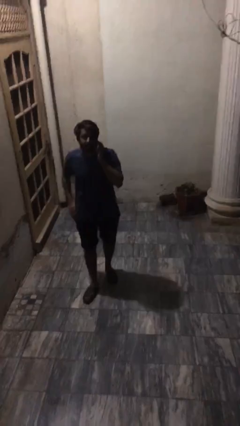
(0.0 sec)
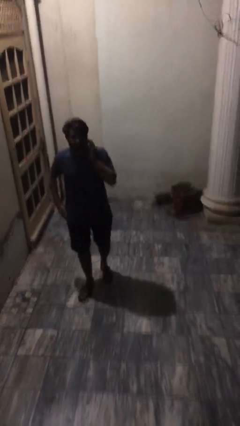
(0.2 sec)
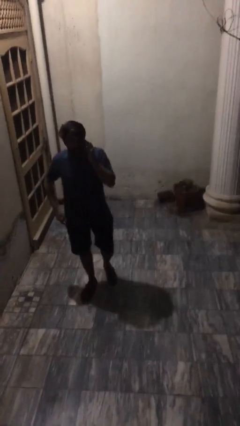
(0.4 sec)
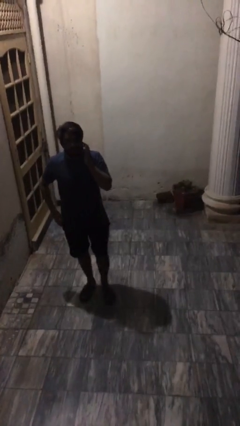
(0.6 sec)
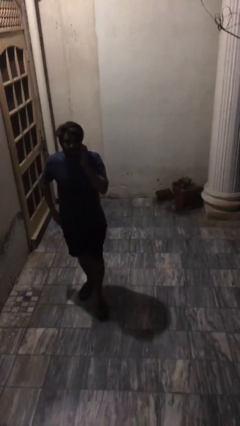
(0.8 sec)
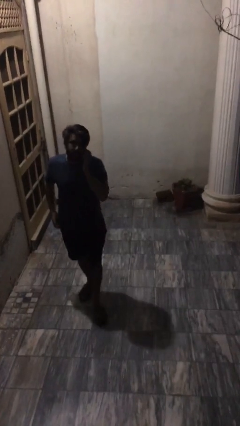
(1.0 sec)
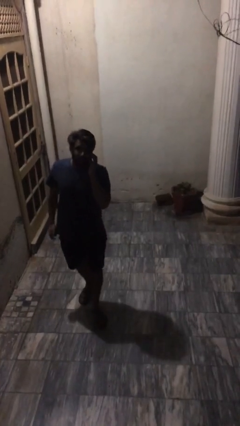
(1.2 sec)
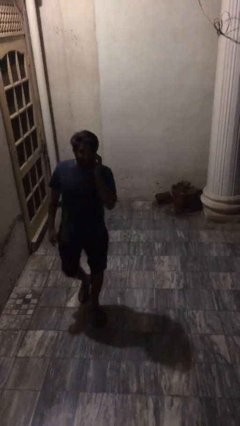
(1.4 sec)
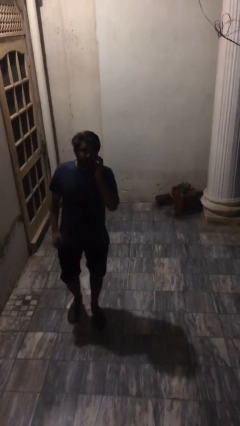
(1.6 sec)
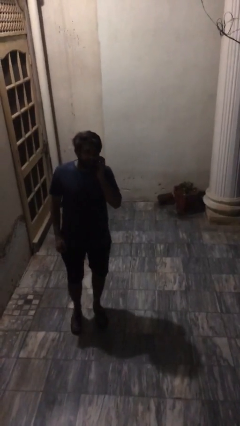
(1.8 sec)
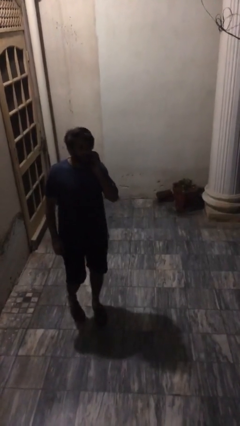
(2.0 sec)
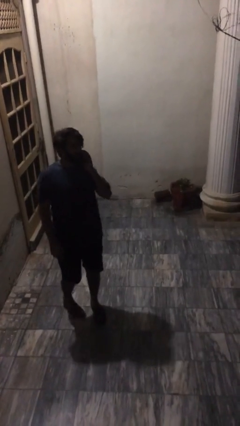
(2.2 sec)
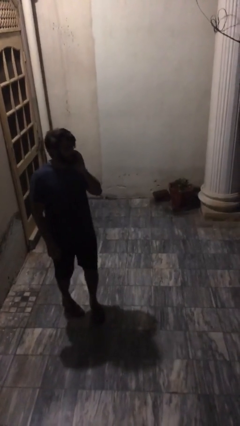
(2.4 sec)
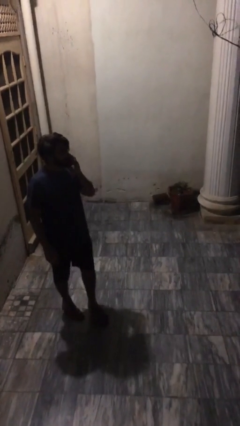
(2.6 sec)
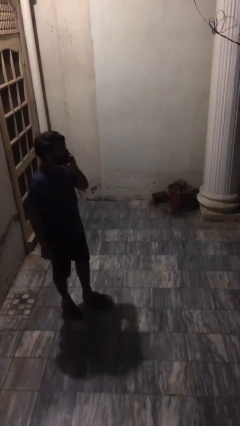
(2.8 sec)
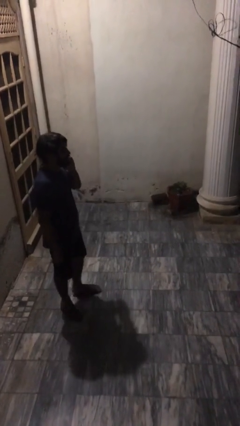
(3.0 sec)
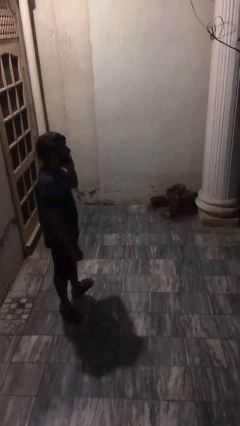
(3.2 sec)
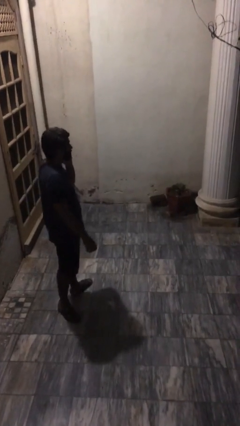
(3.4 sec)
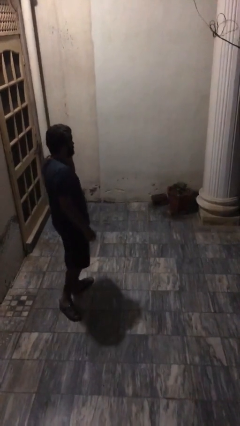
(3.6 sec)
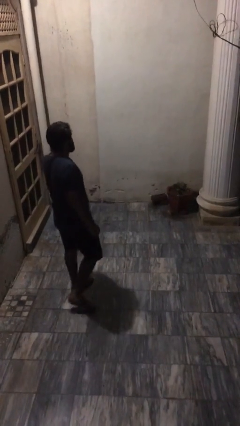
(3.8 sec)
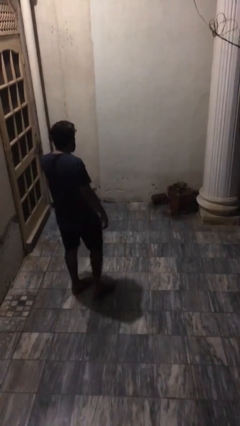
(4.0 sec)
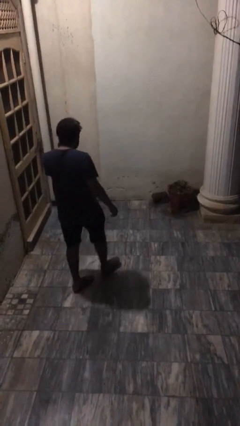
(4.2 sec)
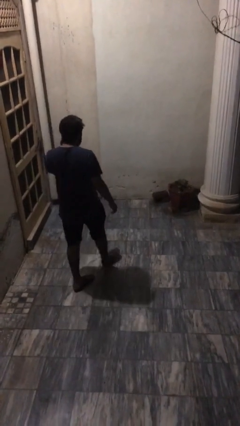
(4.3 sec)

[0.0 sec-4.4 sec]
person talks on phone

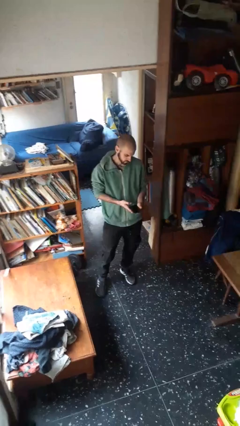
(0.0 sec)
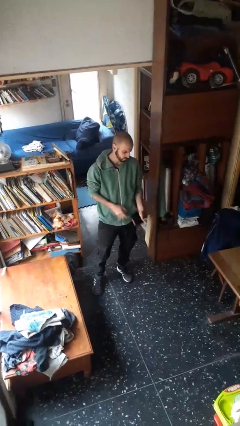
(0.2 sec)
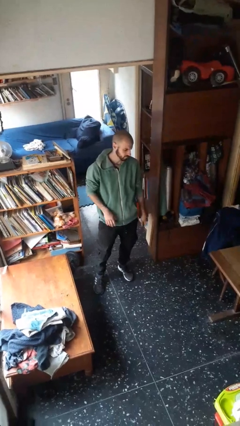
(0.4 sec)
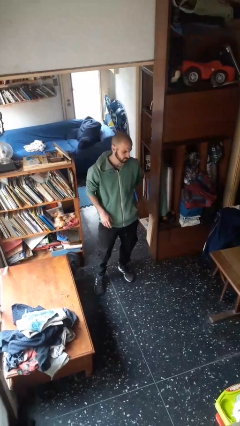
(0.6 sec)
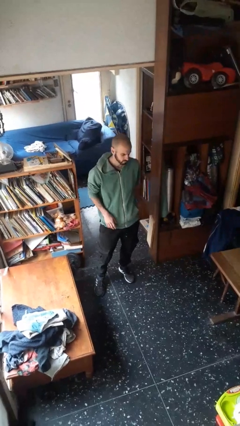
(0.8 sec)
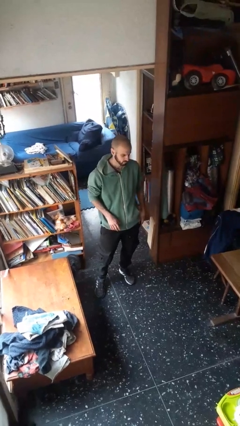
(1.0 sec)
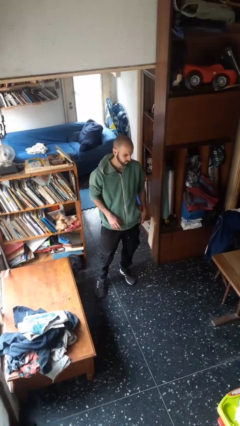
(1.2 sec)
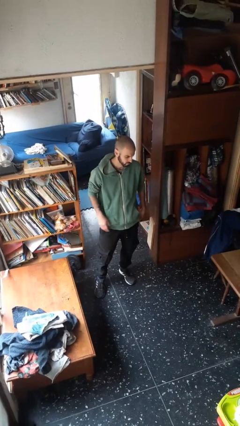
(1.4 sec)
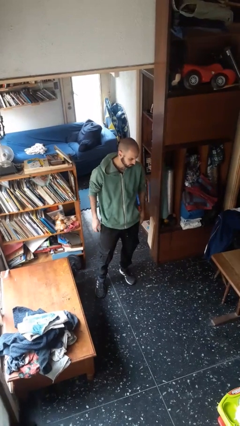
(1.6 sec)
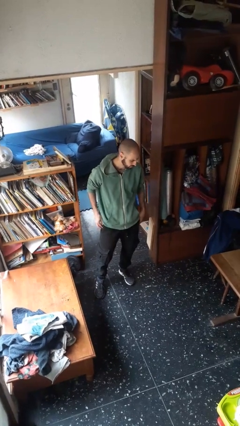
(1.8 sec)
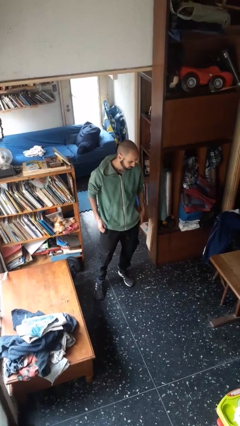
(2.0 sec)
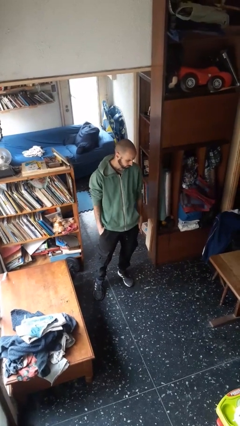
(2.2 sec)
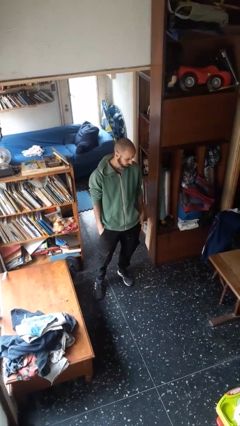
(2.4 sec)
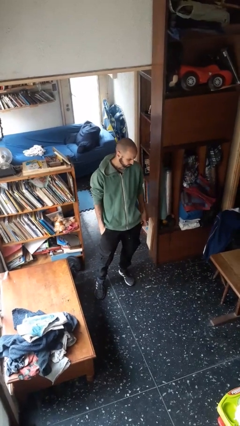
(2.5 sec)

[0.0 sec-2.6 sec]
person puts phone into pocket

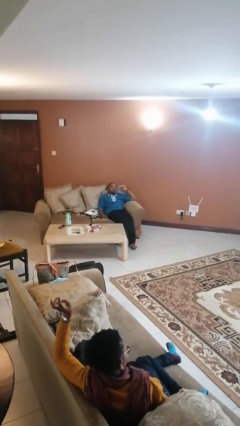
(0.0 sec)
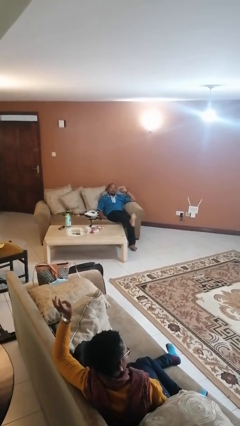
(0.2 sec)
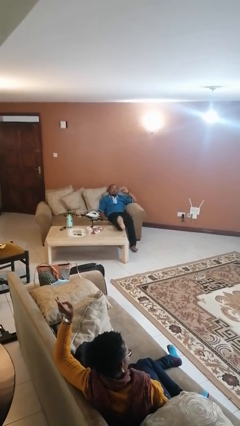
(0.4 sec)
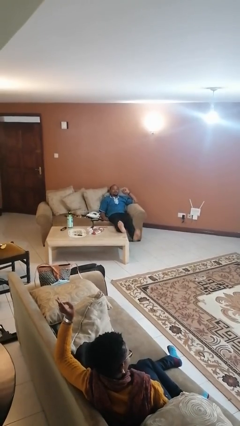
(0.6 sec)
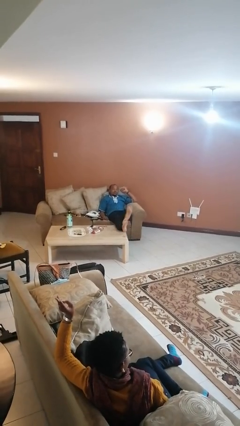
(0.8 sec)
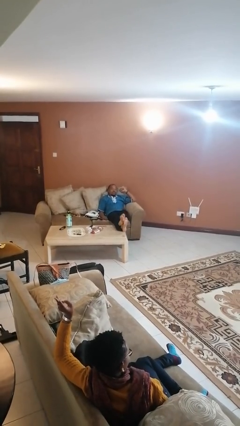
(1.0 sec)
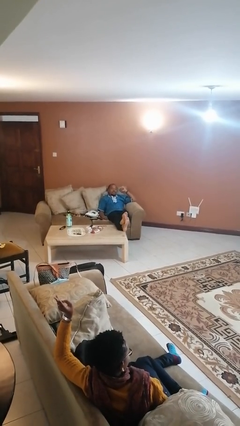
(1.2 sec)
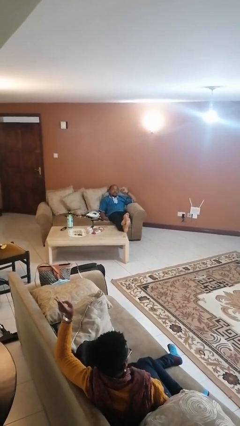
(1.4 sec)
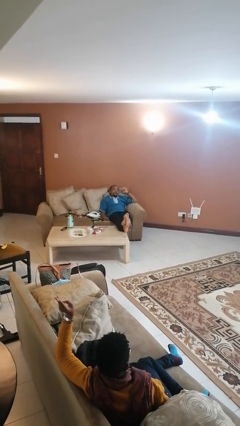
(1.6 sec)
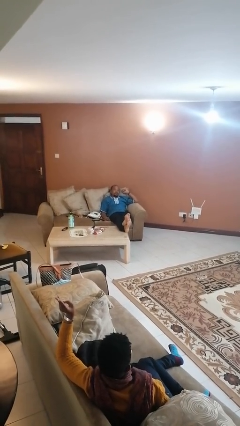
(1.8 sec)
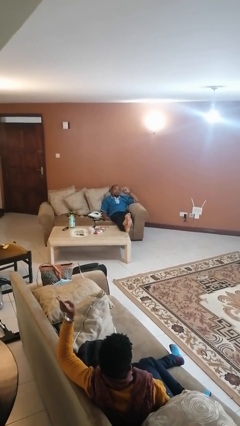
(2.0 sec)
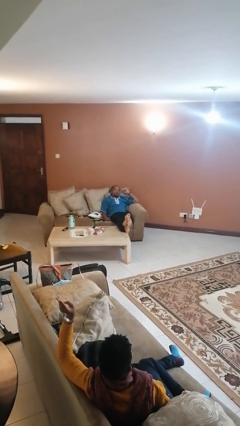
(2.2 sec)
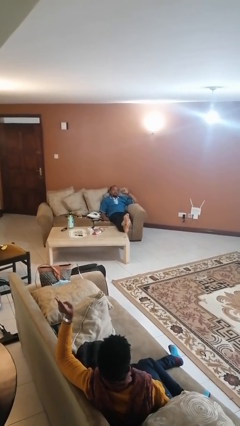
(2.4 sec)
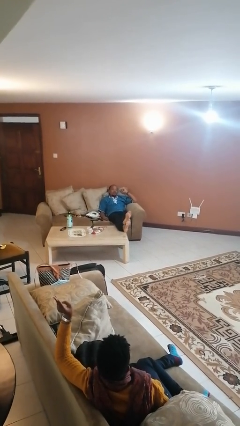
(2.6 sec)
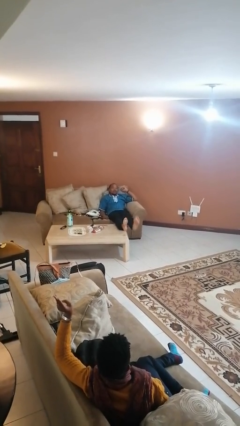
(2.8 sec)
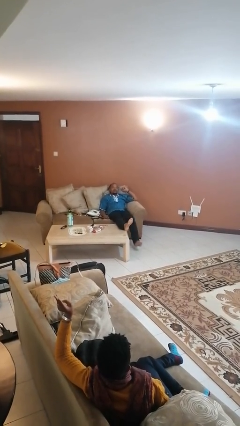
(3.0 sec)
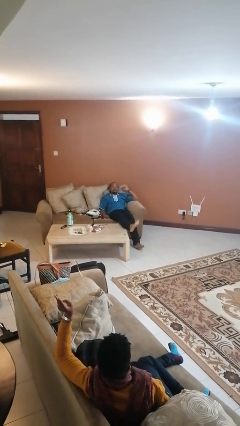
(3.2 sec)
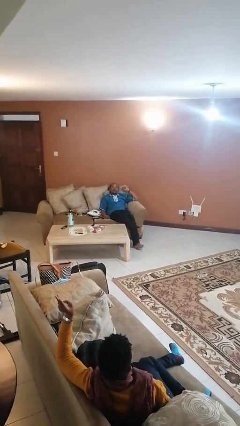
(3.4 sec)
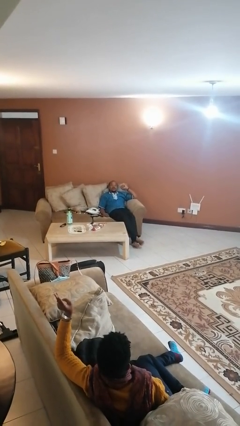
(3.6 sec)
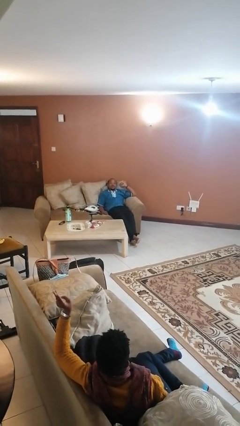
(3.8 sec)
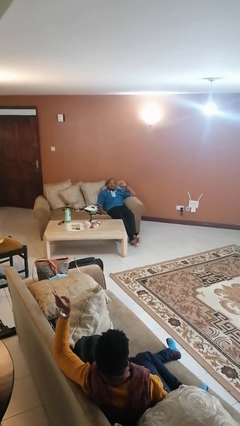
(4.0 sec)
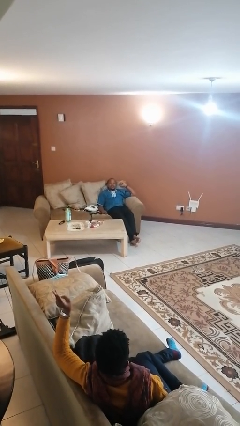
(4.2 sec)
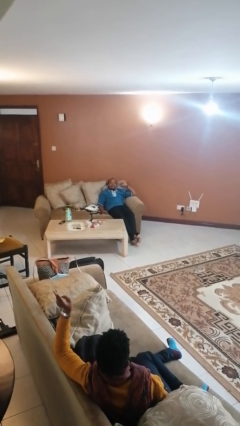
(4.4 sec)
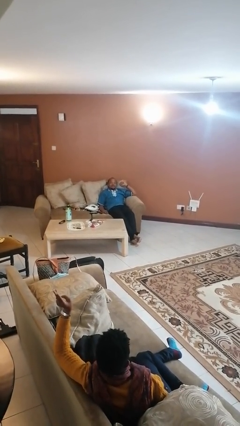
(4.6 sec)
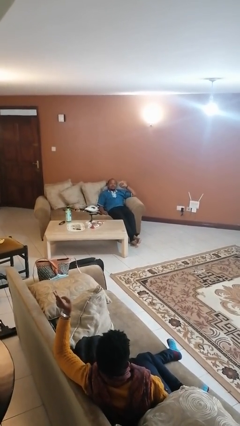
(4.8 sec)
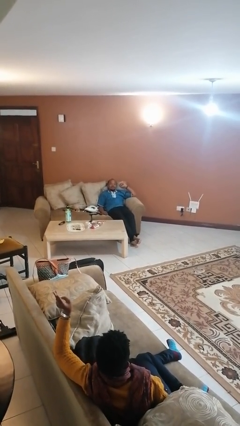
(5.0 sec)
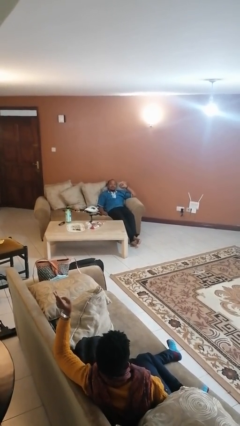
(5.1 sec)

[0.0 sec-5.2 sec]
person puts feet up

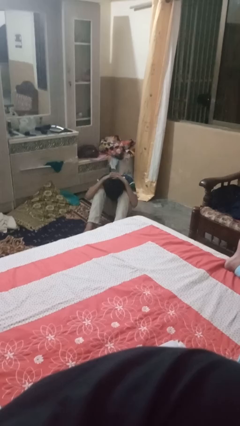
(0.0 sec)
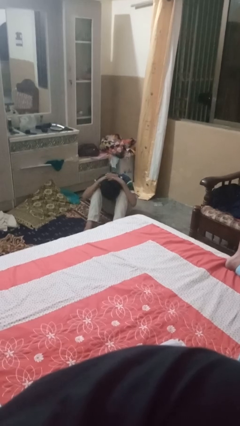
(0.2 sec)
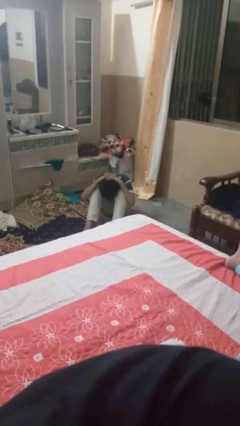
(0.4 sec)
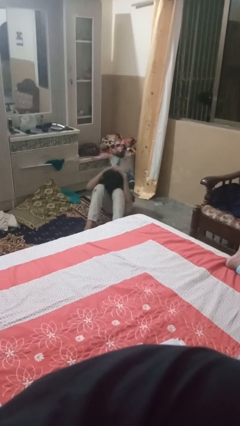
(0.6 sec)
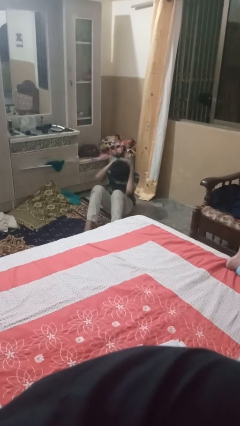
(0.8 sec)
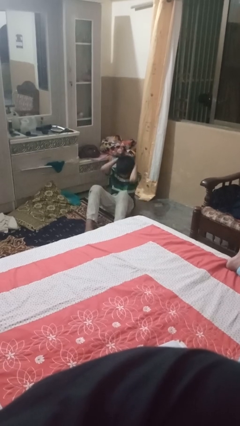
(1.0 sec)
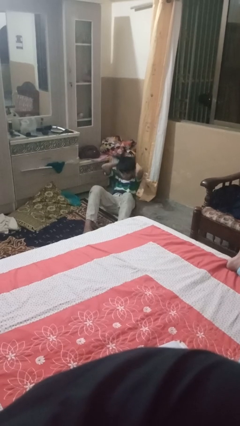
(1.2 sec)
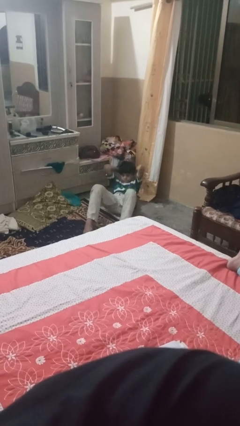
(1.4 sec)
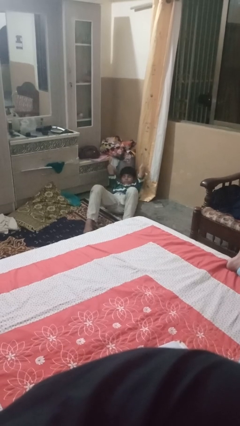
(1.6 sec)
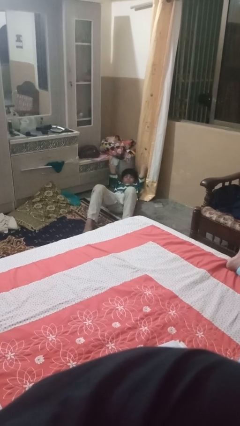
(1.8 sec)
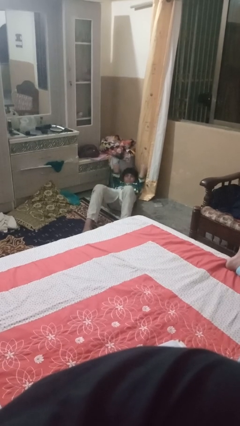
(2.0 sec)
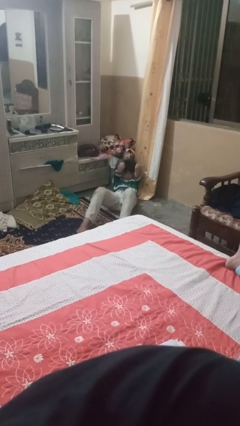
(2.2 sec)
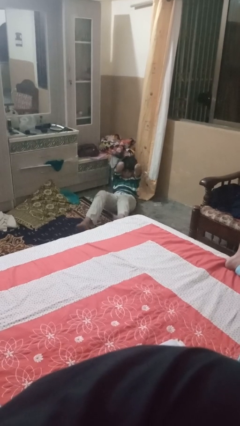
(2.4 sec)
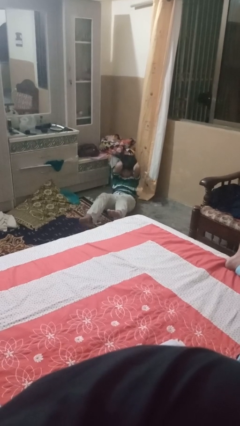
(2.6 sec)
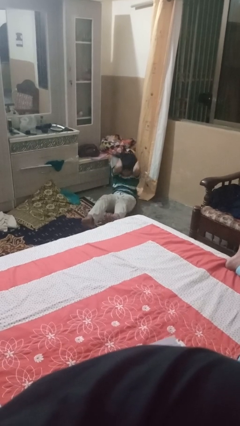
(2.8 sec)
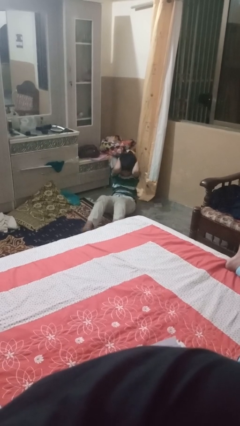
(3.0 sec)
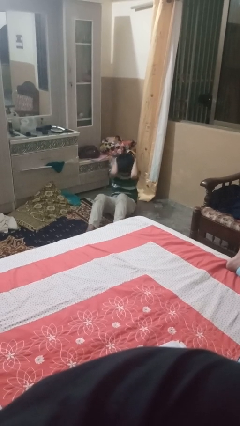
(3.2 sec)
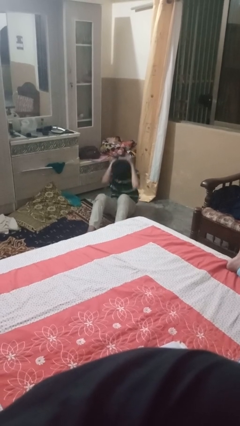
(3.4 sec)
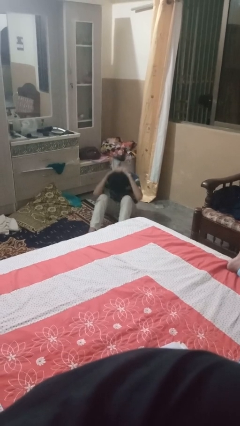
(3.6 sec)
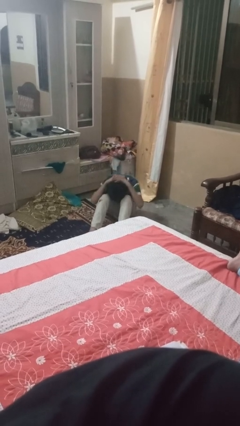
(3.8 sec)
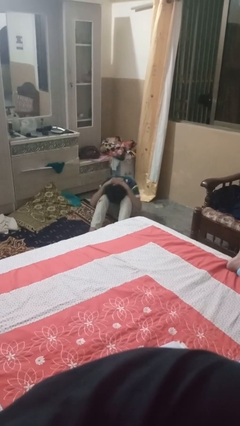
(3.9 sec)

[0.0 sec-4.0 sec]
person exercises with situp

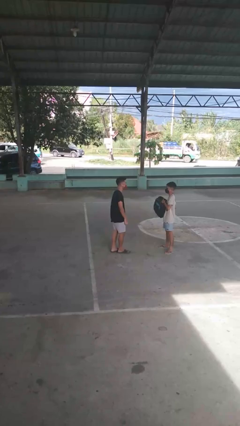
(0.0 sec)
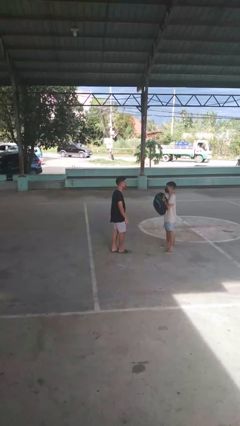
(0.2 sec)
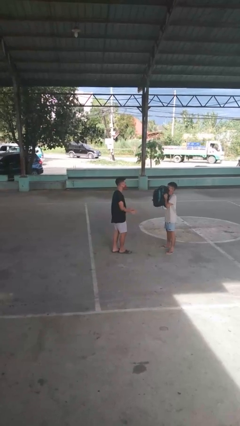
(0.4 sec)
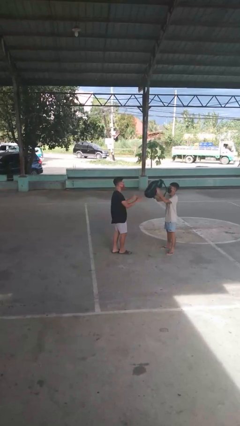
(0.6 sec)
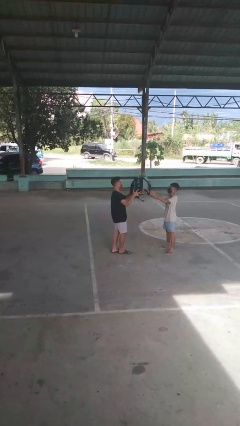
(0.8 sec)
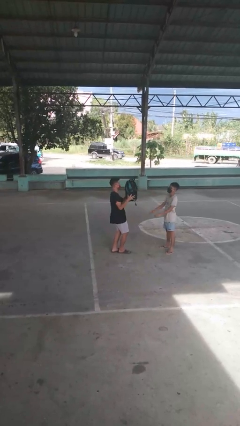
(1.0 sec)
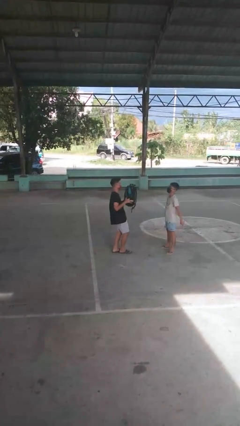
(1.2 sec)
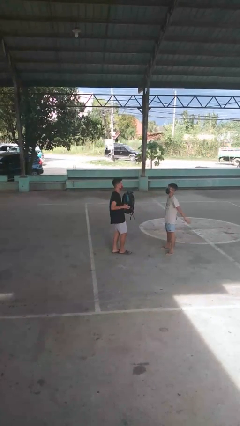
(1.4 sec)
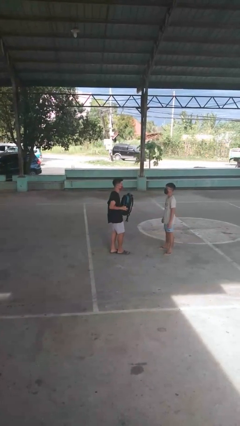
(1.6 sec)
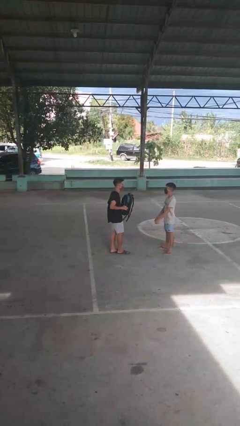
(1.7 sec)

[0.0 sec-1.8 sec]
person catches object from person
